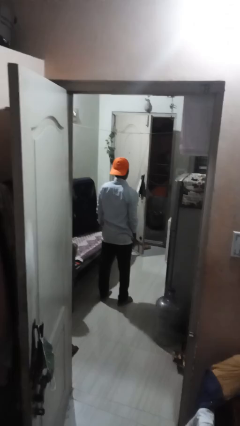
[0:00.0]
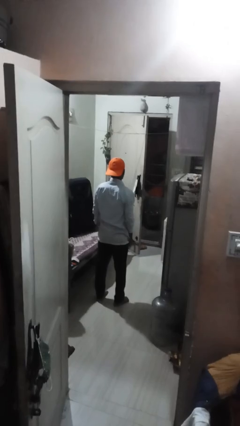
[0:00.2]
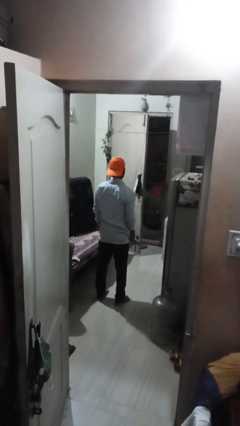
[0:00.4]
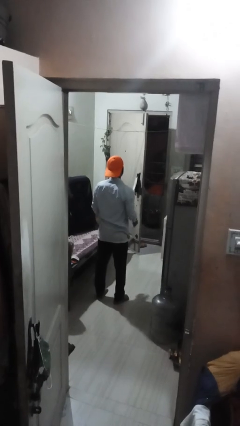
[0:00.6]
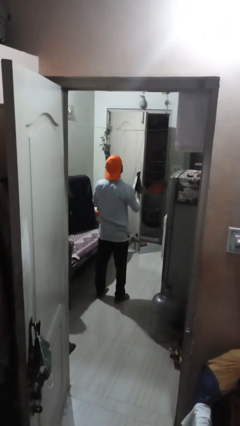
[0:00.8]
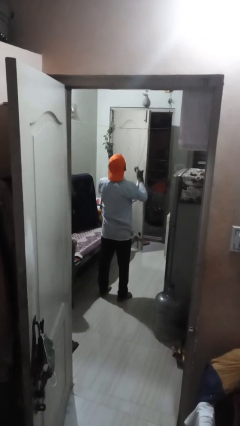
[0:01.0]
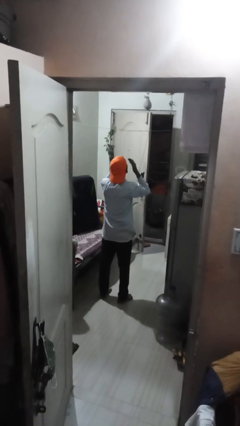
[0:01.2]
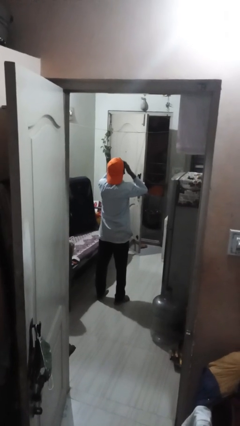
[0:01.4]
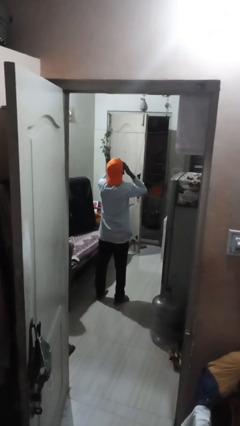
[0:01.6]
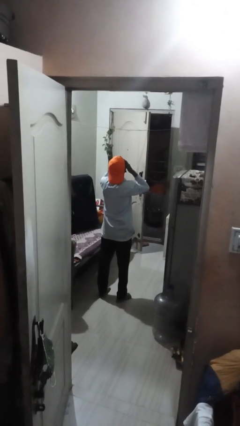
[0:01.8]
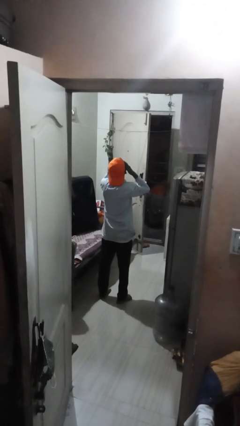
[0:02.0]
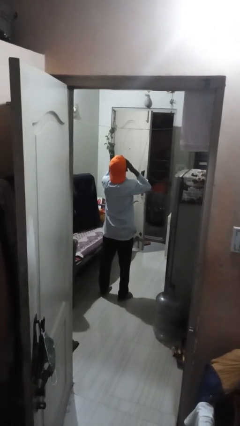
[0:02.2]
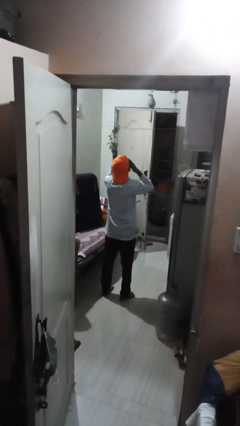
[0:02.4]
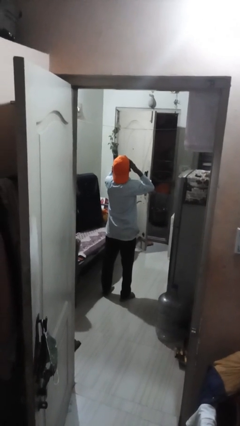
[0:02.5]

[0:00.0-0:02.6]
person covers face with hands

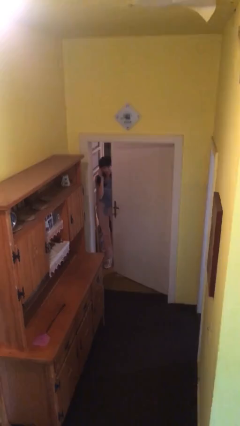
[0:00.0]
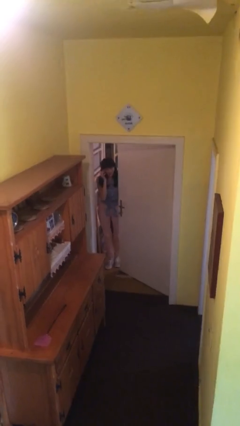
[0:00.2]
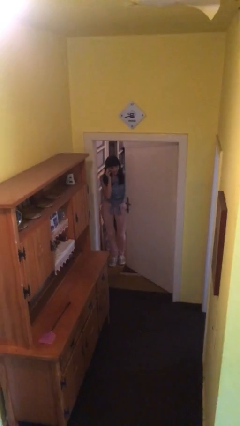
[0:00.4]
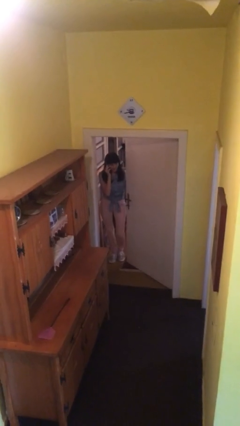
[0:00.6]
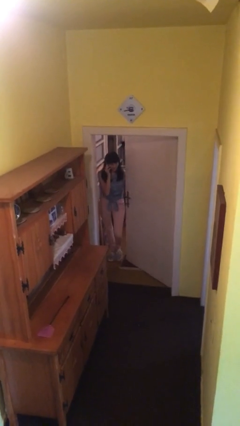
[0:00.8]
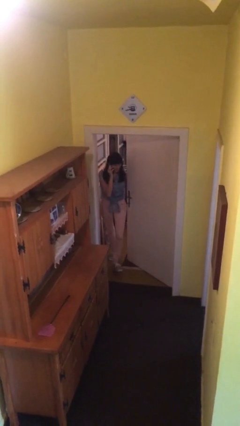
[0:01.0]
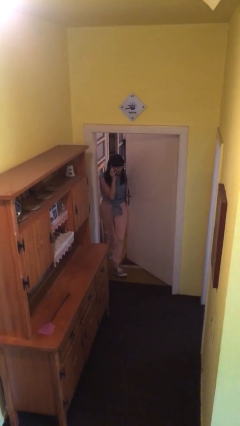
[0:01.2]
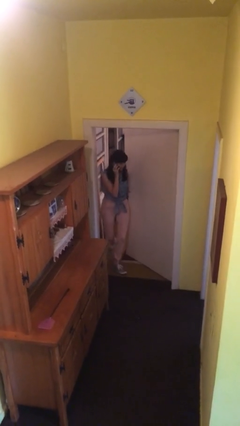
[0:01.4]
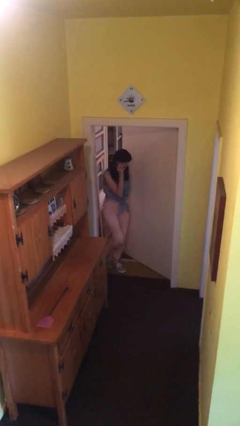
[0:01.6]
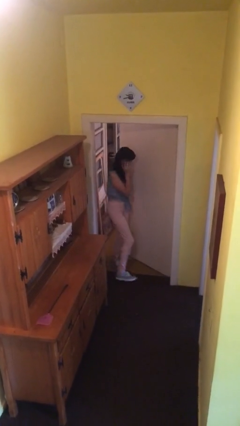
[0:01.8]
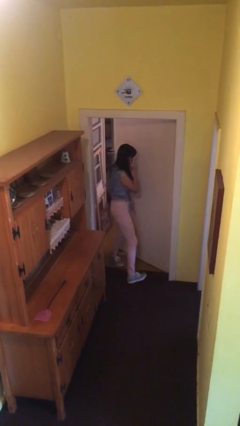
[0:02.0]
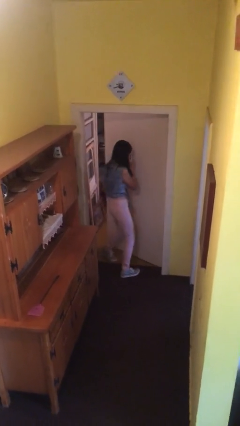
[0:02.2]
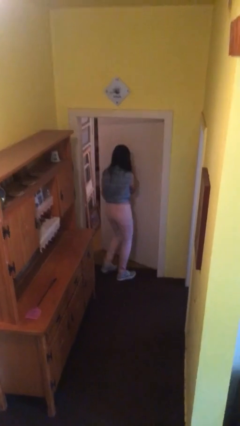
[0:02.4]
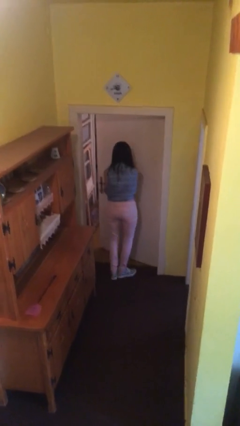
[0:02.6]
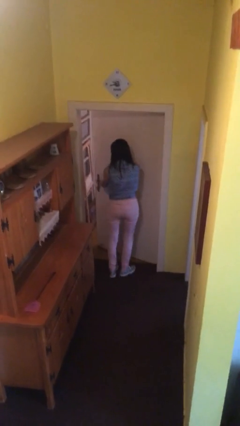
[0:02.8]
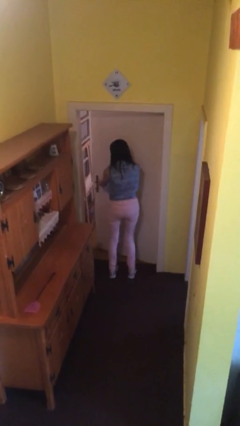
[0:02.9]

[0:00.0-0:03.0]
person enters scene through structure

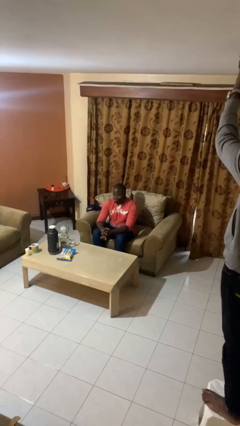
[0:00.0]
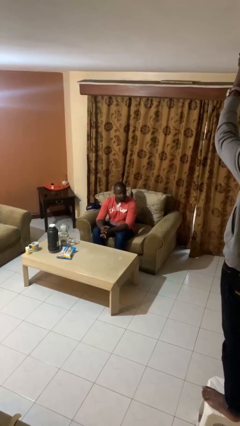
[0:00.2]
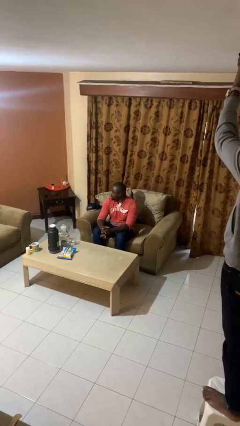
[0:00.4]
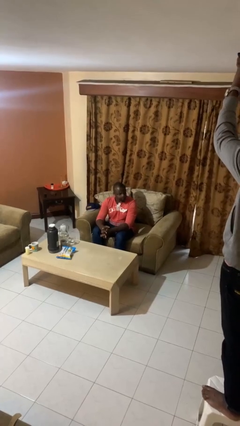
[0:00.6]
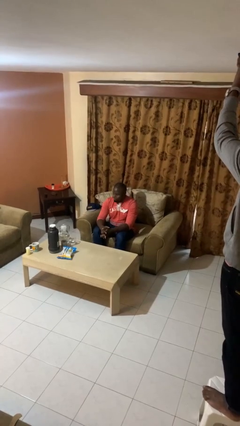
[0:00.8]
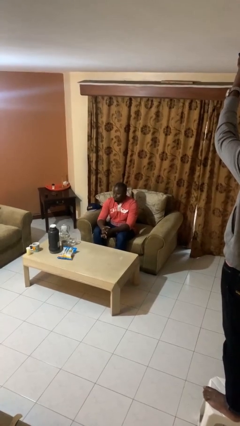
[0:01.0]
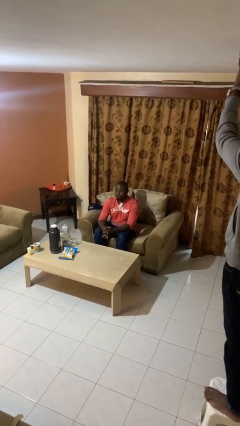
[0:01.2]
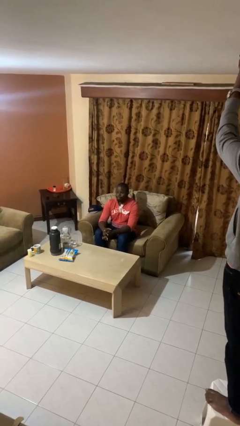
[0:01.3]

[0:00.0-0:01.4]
person shakes head

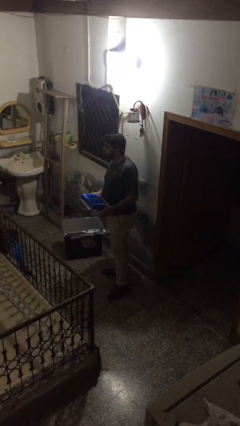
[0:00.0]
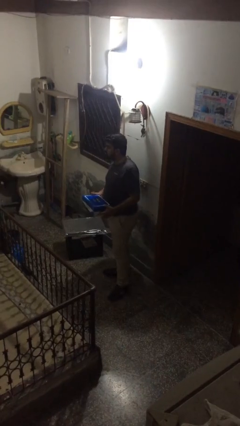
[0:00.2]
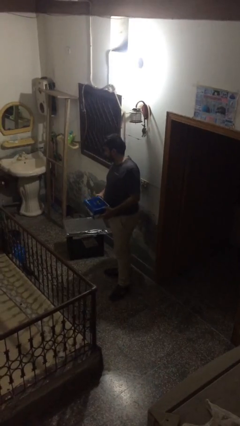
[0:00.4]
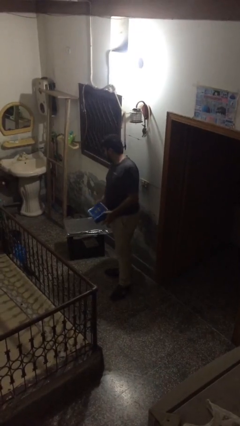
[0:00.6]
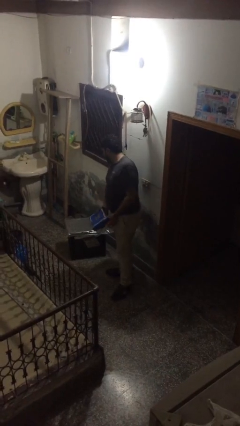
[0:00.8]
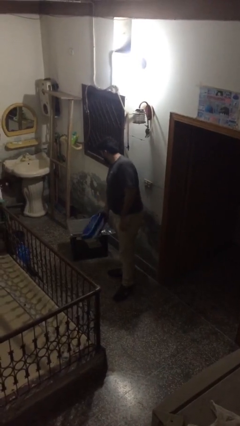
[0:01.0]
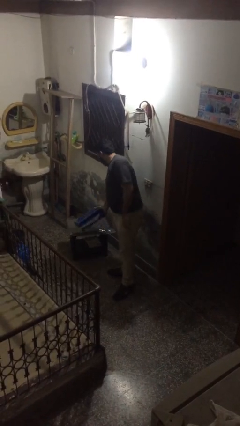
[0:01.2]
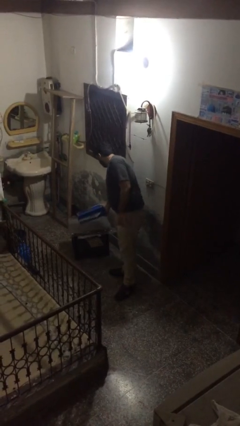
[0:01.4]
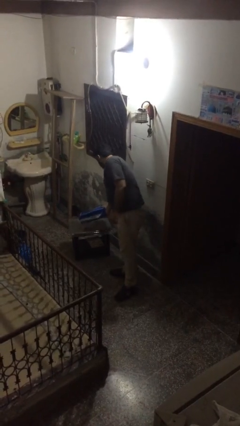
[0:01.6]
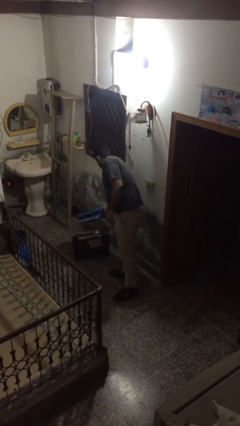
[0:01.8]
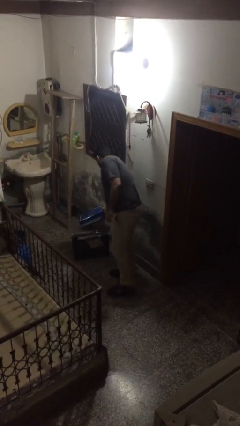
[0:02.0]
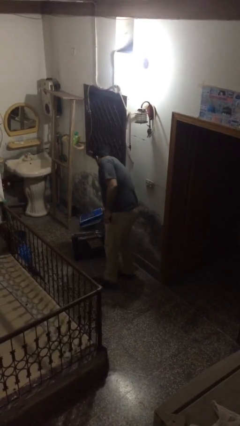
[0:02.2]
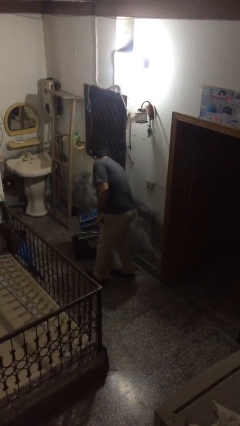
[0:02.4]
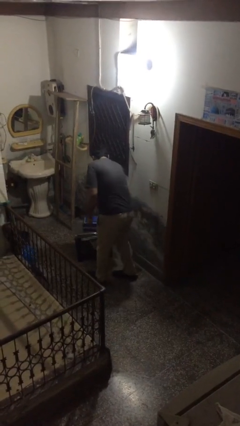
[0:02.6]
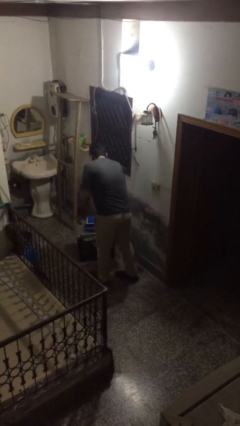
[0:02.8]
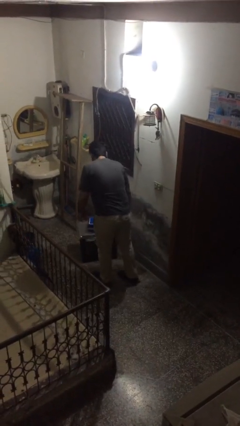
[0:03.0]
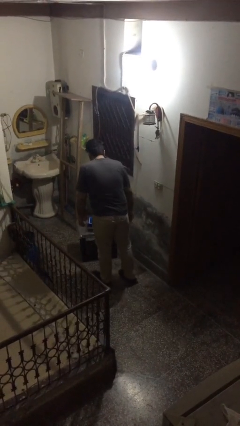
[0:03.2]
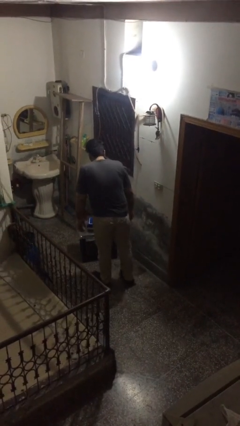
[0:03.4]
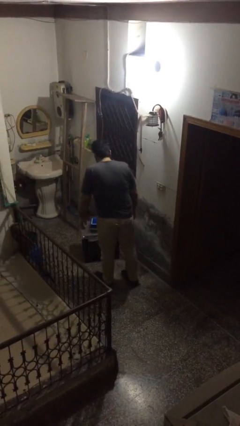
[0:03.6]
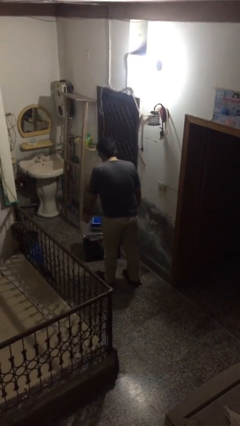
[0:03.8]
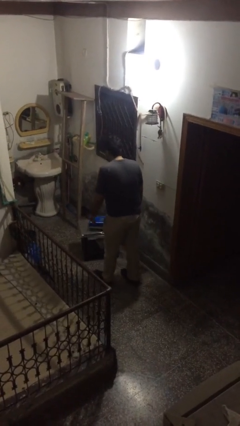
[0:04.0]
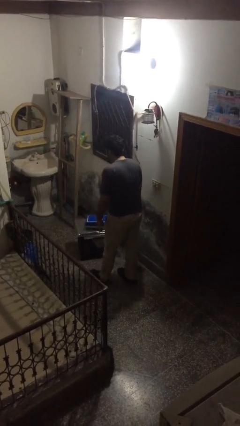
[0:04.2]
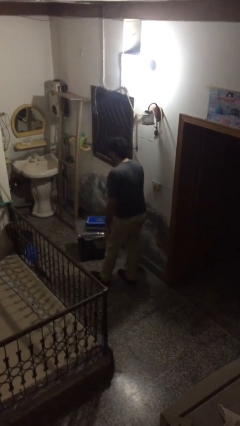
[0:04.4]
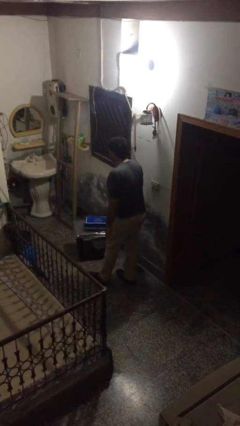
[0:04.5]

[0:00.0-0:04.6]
person puts down object on table

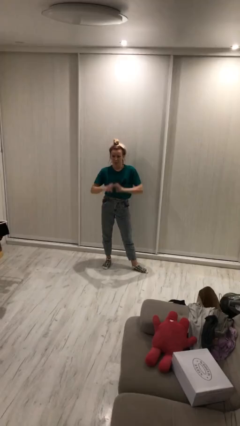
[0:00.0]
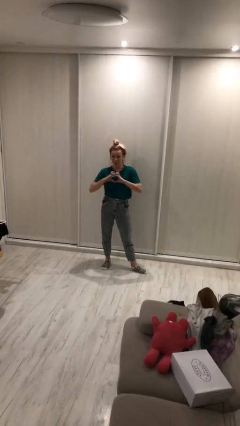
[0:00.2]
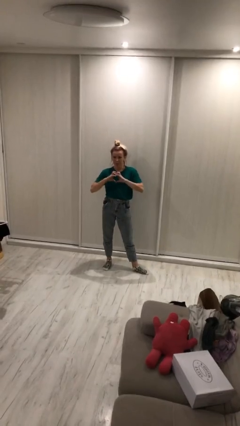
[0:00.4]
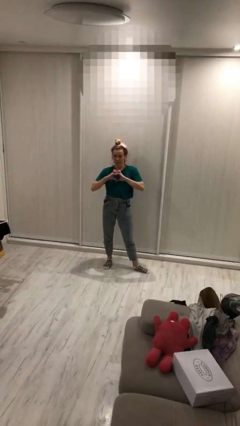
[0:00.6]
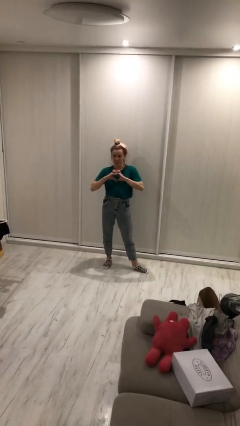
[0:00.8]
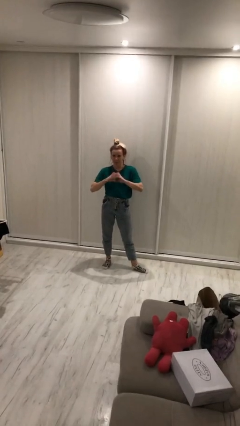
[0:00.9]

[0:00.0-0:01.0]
person gestures heart

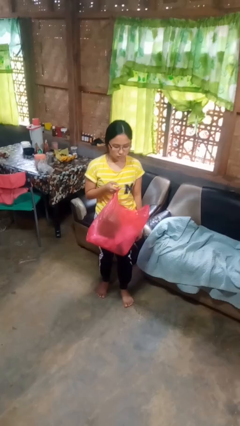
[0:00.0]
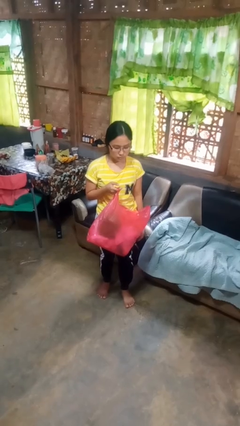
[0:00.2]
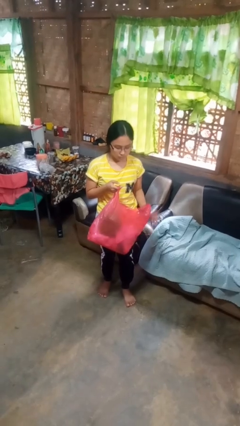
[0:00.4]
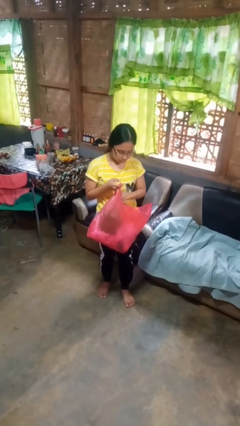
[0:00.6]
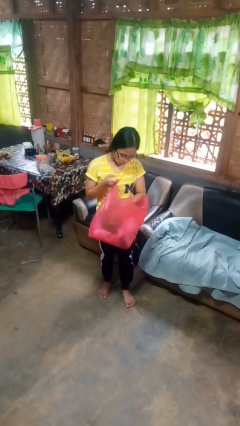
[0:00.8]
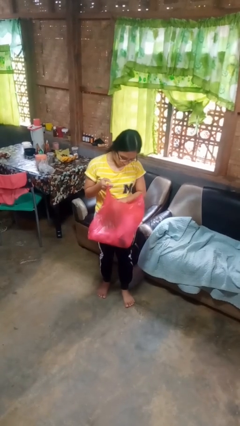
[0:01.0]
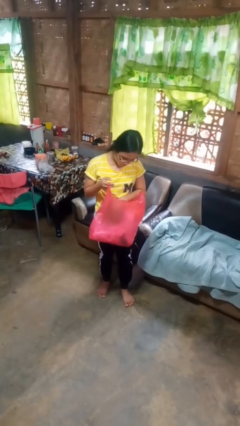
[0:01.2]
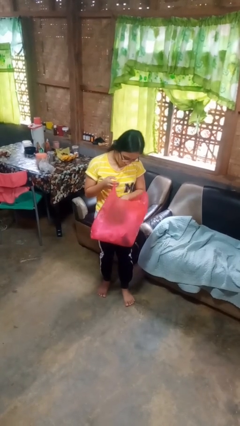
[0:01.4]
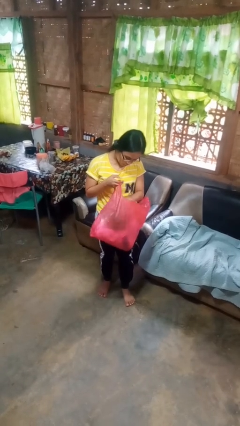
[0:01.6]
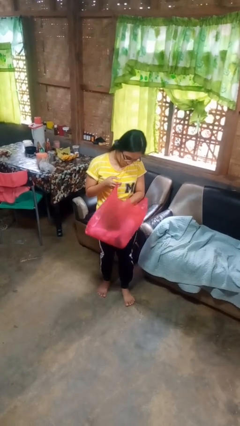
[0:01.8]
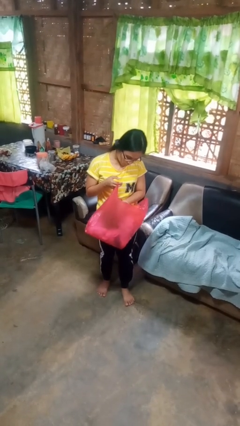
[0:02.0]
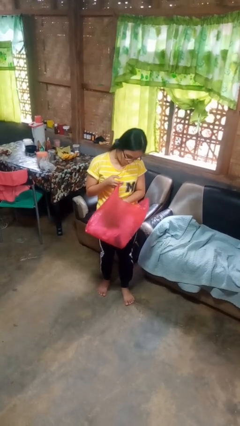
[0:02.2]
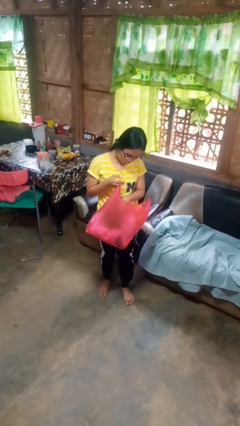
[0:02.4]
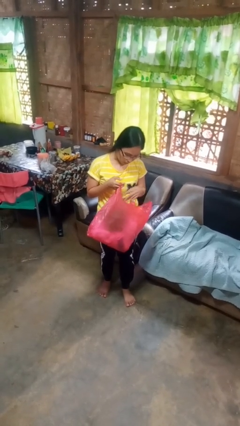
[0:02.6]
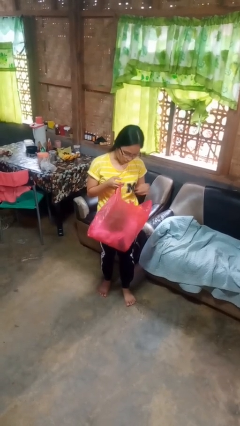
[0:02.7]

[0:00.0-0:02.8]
person searches in bag

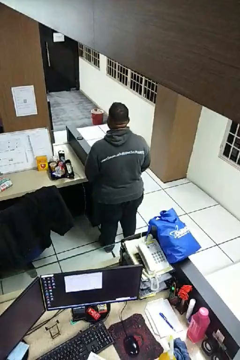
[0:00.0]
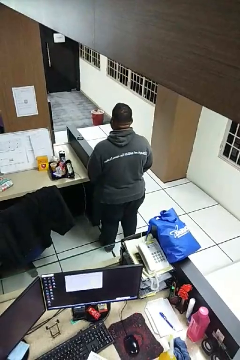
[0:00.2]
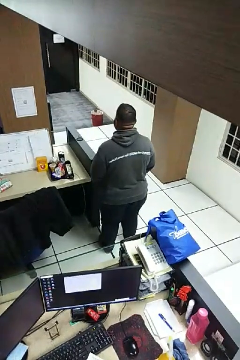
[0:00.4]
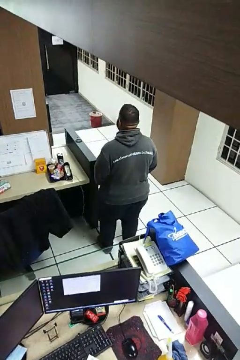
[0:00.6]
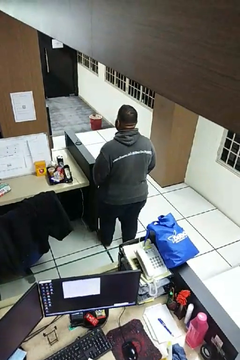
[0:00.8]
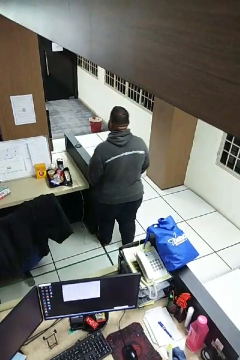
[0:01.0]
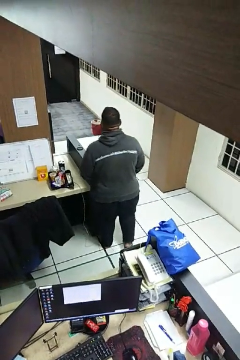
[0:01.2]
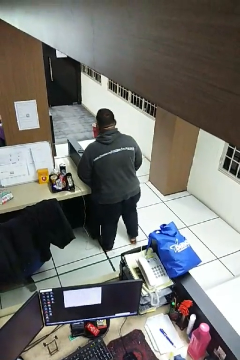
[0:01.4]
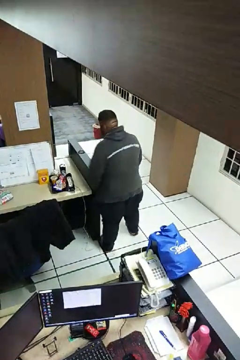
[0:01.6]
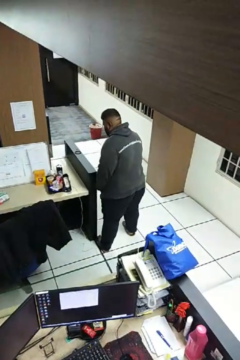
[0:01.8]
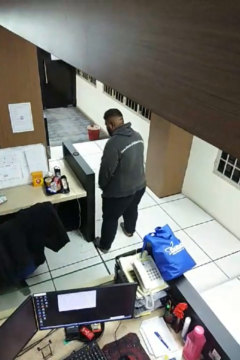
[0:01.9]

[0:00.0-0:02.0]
person bumps into table

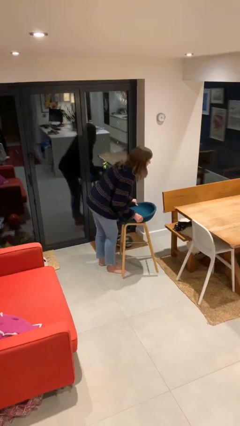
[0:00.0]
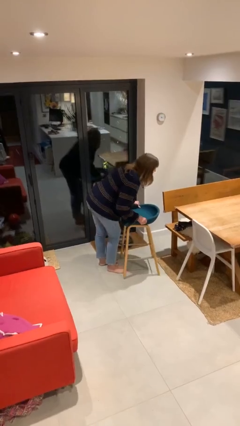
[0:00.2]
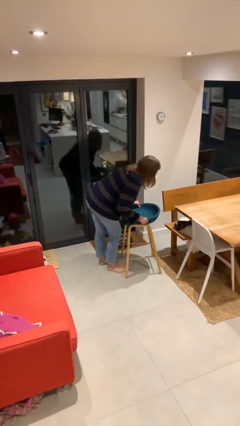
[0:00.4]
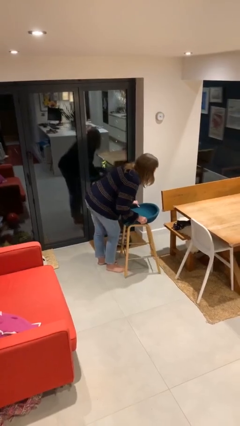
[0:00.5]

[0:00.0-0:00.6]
person puts down object on floor
